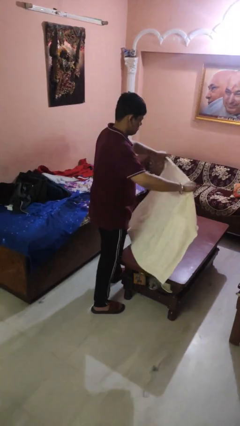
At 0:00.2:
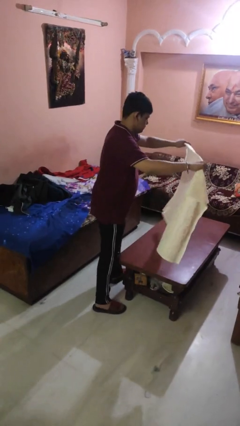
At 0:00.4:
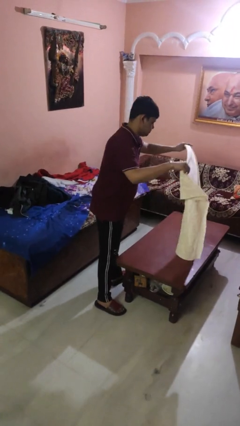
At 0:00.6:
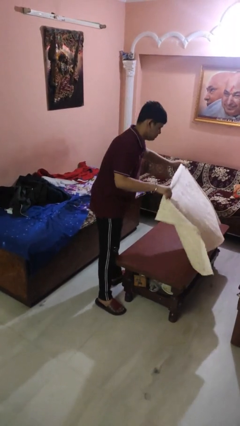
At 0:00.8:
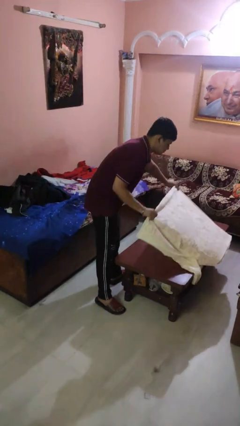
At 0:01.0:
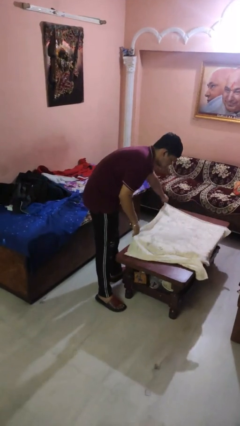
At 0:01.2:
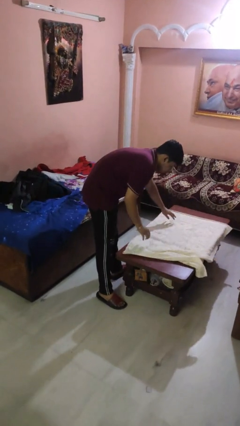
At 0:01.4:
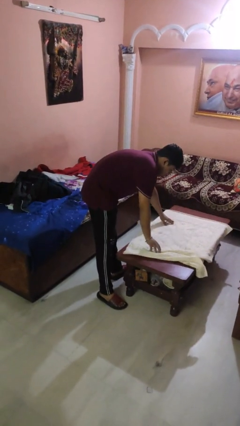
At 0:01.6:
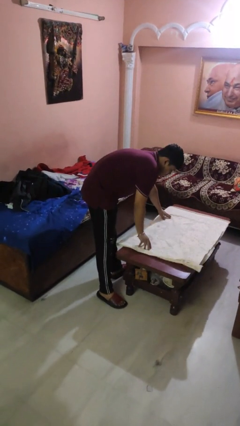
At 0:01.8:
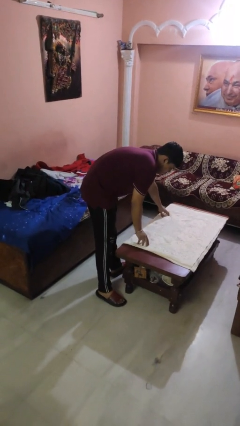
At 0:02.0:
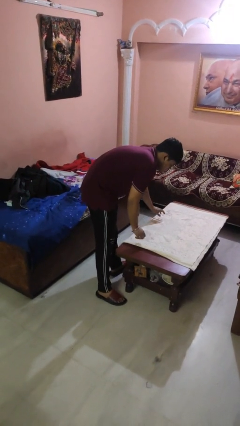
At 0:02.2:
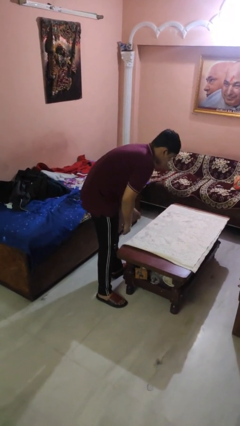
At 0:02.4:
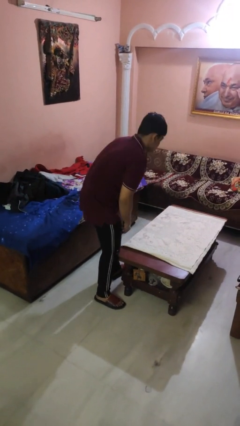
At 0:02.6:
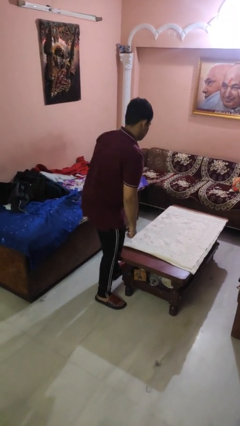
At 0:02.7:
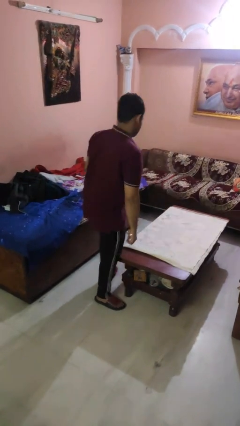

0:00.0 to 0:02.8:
person spreads tablecloth

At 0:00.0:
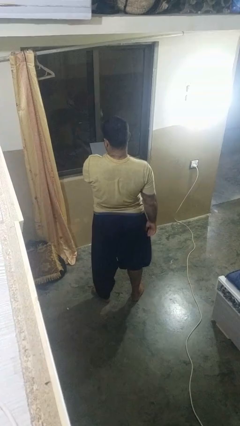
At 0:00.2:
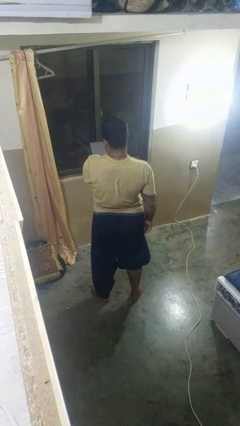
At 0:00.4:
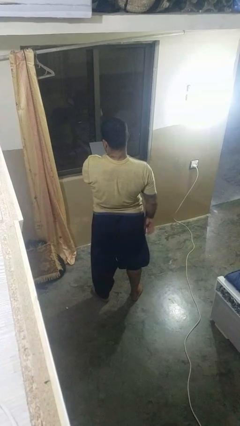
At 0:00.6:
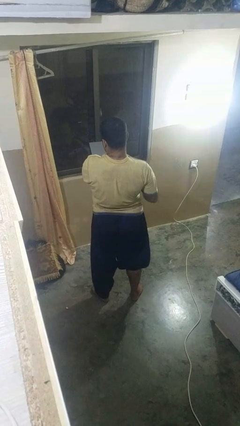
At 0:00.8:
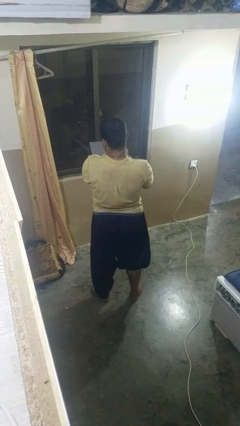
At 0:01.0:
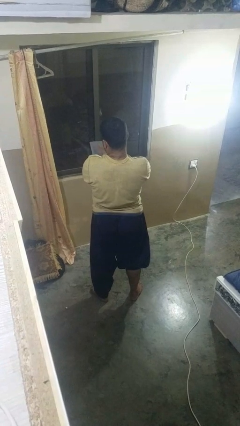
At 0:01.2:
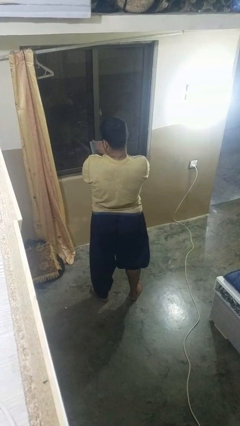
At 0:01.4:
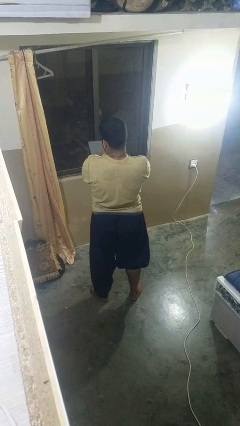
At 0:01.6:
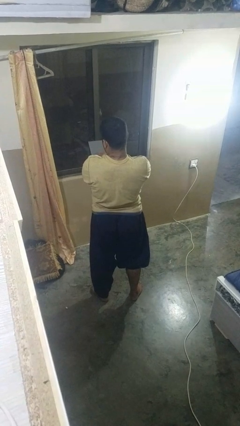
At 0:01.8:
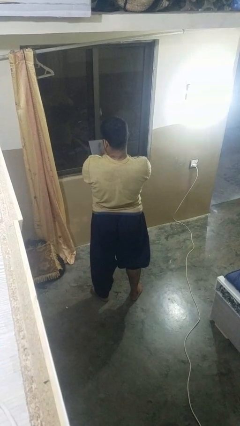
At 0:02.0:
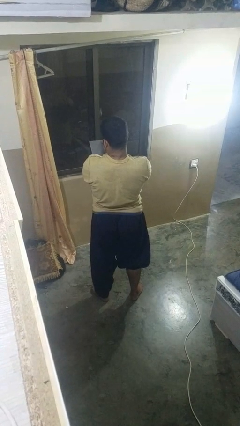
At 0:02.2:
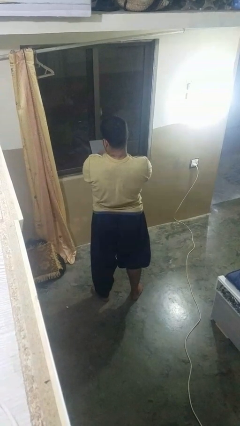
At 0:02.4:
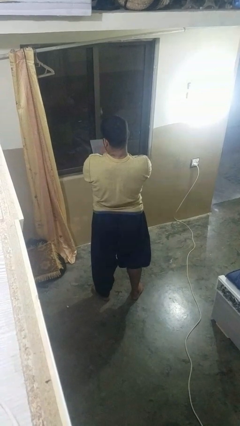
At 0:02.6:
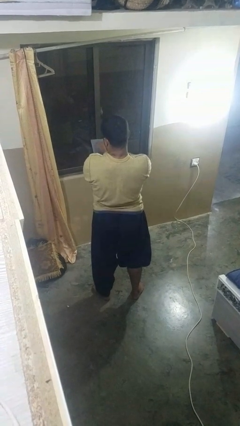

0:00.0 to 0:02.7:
person interacts with tablet

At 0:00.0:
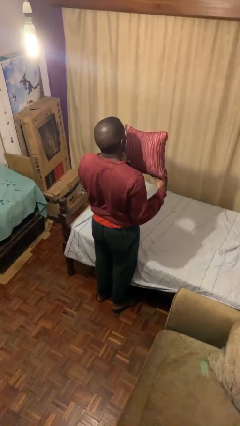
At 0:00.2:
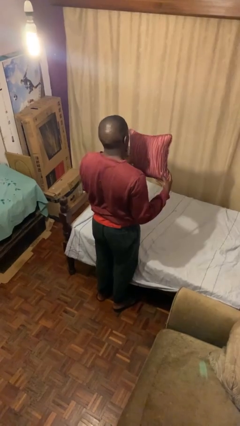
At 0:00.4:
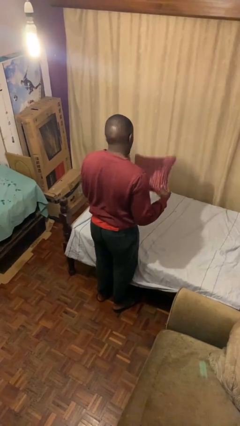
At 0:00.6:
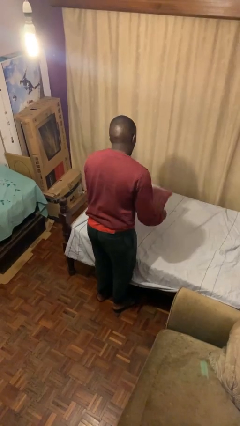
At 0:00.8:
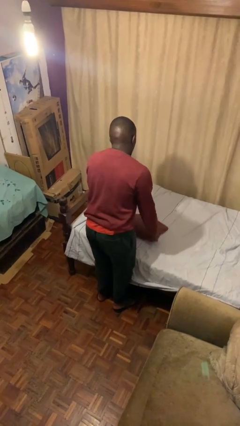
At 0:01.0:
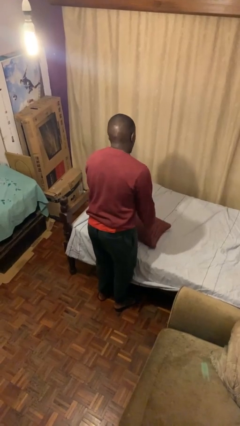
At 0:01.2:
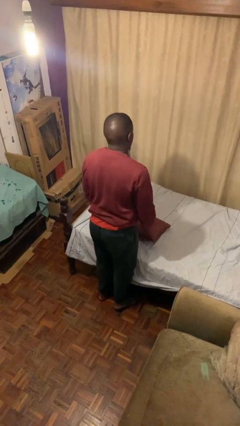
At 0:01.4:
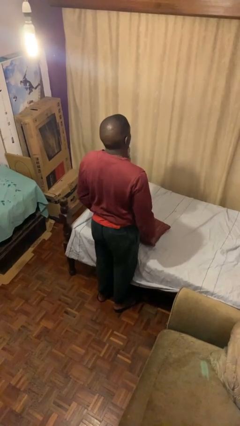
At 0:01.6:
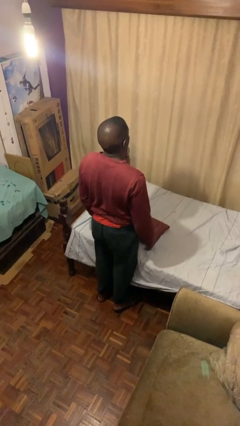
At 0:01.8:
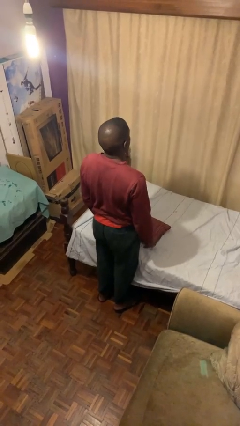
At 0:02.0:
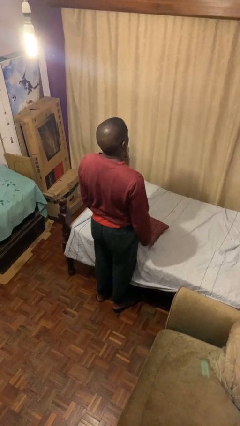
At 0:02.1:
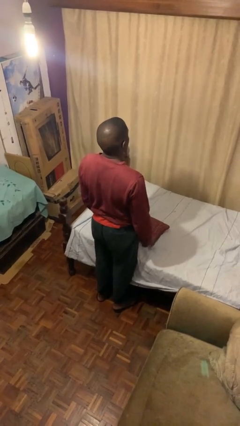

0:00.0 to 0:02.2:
person puts down object on bed

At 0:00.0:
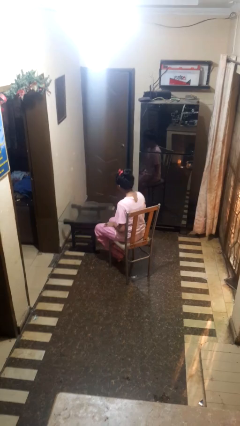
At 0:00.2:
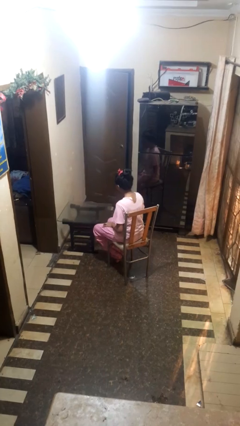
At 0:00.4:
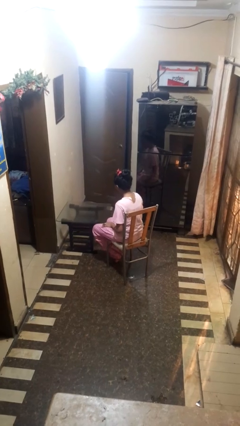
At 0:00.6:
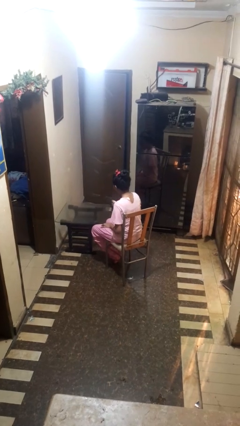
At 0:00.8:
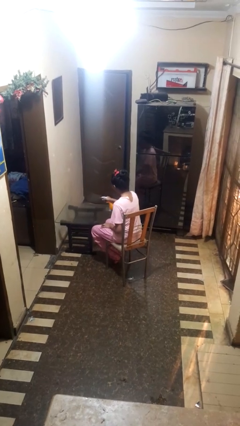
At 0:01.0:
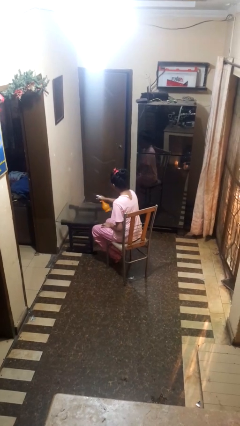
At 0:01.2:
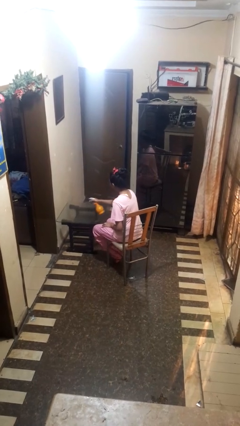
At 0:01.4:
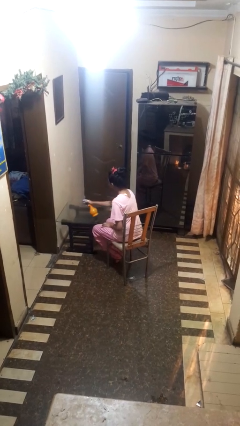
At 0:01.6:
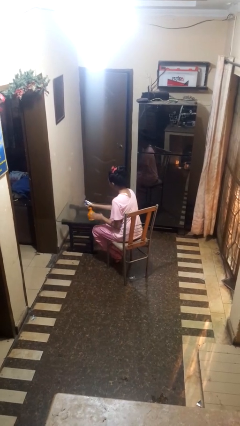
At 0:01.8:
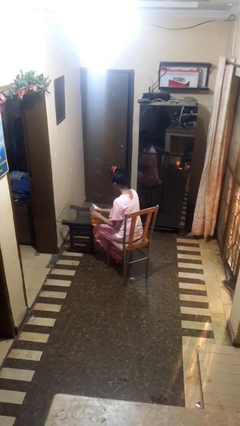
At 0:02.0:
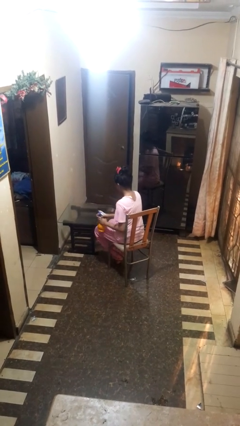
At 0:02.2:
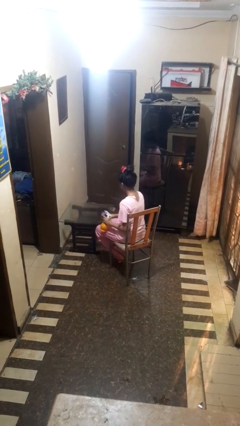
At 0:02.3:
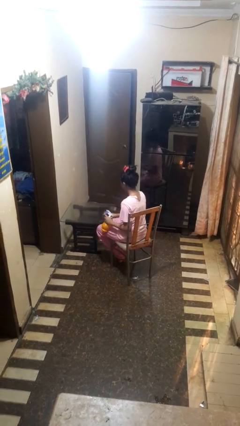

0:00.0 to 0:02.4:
person sprays from bottle

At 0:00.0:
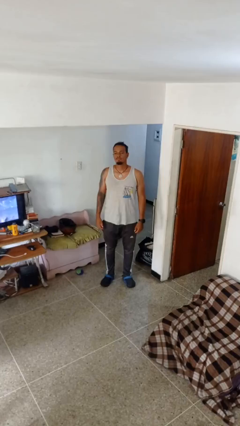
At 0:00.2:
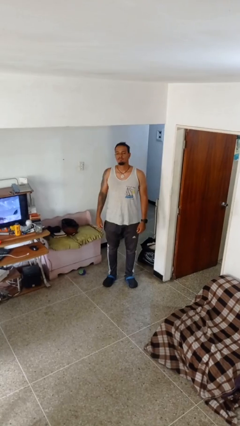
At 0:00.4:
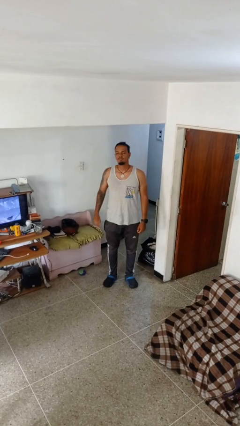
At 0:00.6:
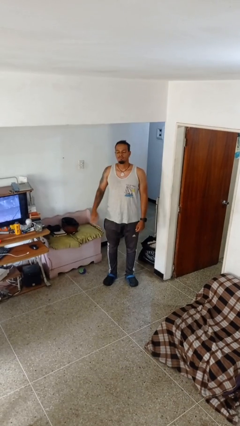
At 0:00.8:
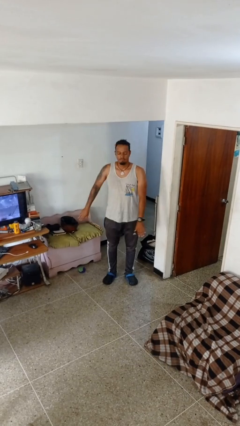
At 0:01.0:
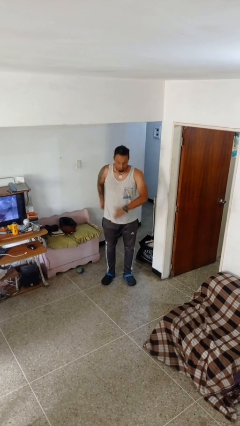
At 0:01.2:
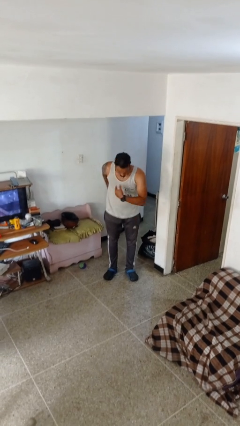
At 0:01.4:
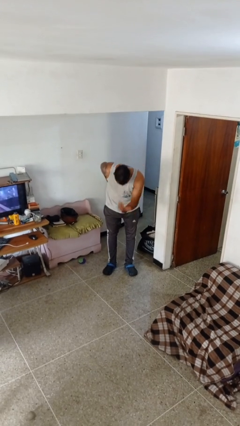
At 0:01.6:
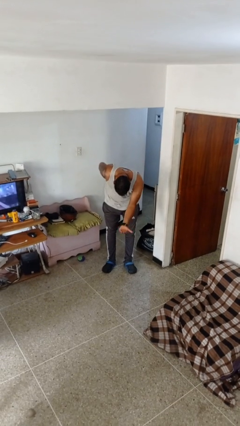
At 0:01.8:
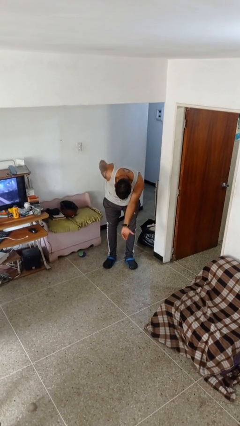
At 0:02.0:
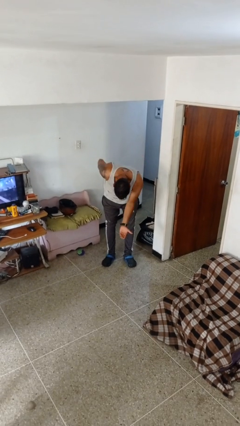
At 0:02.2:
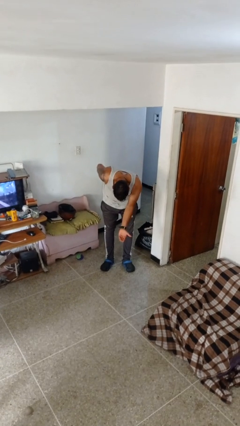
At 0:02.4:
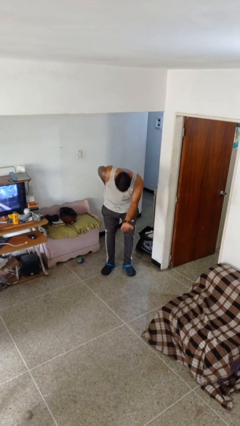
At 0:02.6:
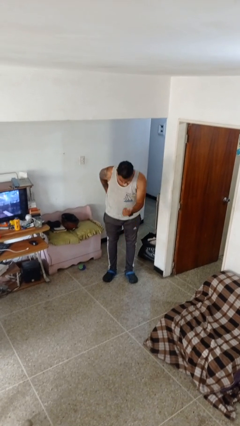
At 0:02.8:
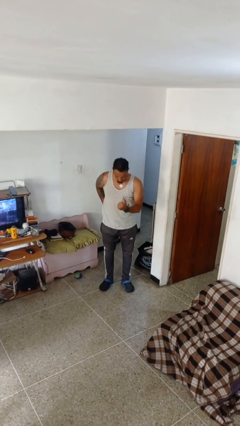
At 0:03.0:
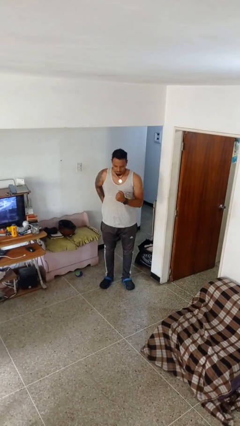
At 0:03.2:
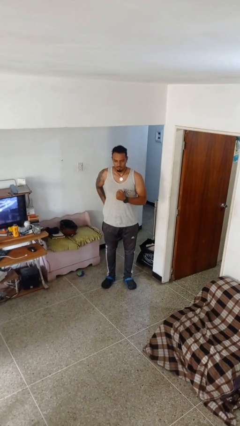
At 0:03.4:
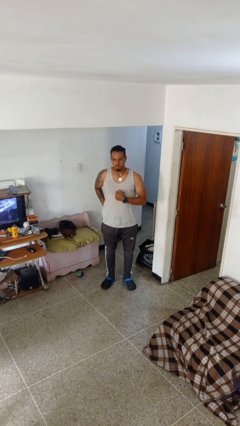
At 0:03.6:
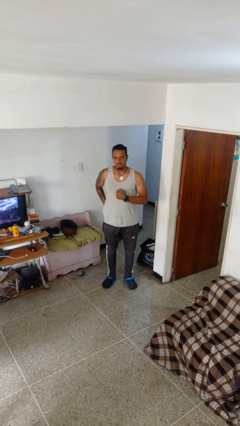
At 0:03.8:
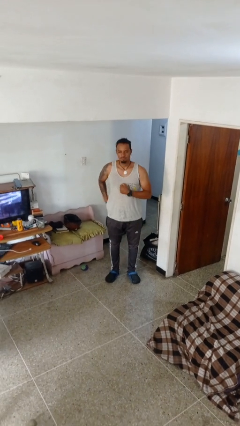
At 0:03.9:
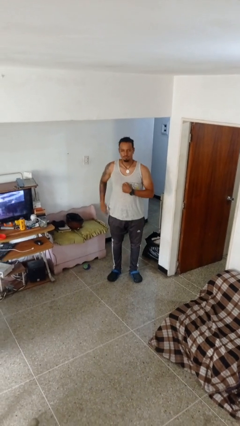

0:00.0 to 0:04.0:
person bows

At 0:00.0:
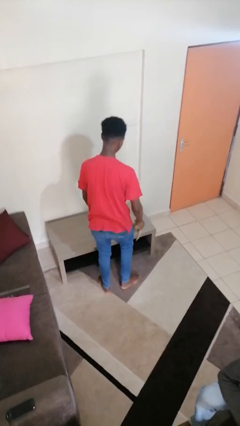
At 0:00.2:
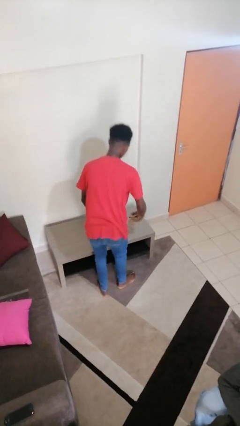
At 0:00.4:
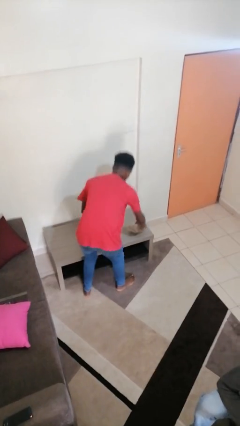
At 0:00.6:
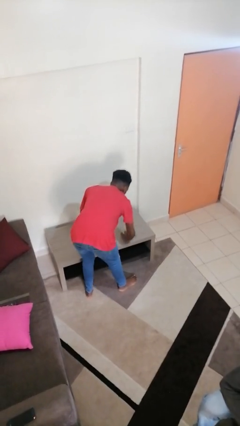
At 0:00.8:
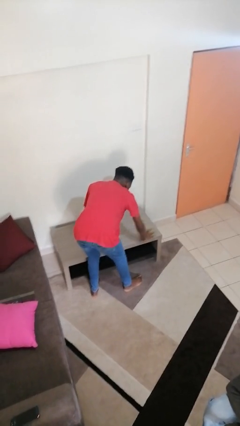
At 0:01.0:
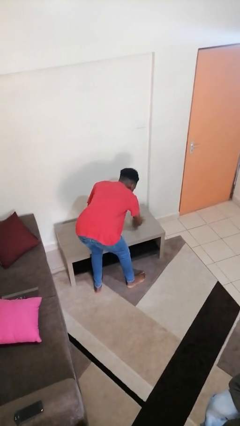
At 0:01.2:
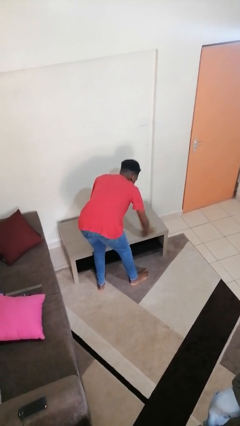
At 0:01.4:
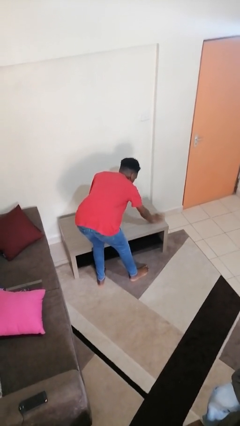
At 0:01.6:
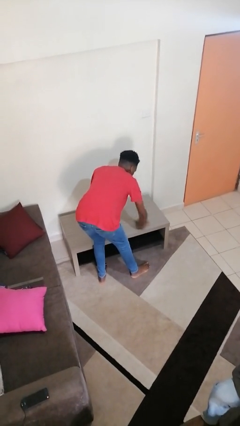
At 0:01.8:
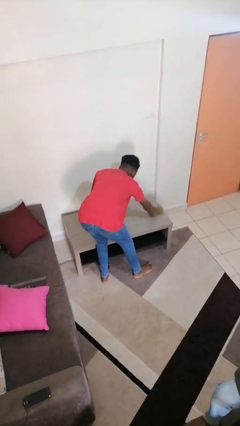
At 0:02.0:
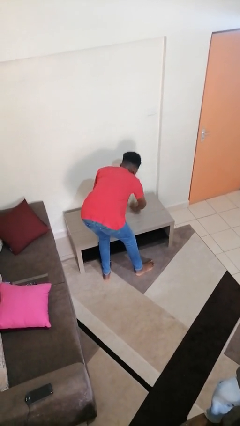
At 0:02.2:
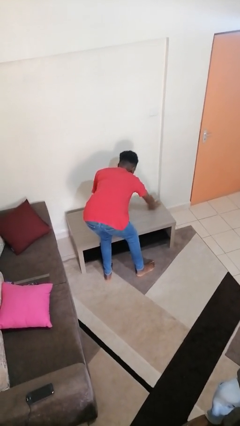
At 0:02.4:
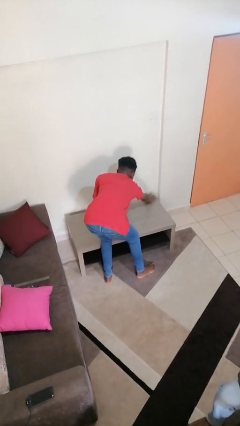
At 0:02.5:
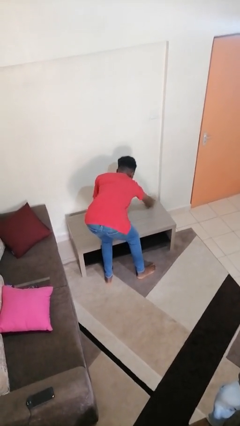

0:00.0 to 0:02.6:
person cleans table with rag

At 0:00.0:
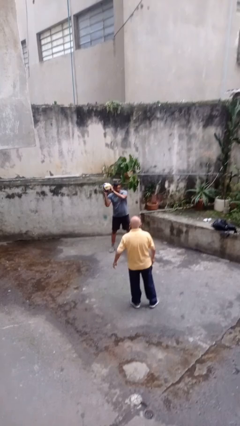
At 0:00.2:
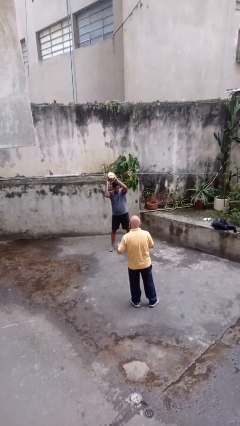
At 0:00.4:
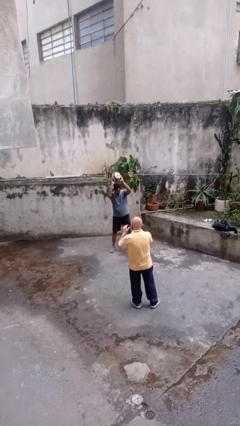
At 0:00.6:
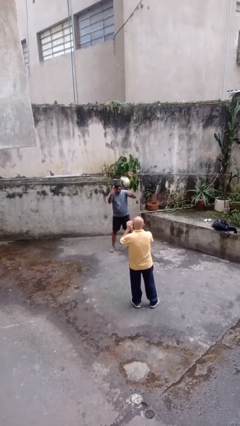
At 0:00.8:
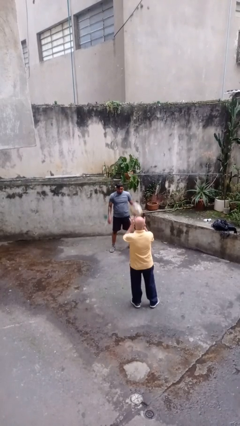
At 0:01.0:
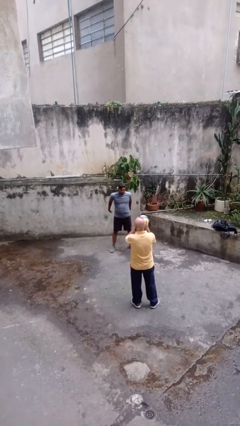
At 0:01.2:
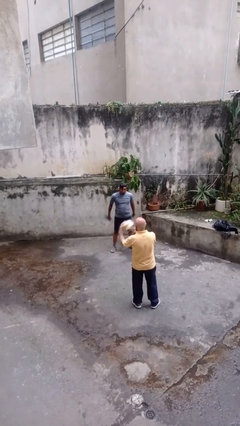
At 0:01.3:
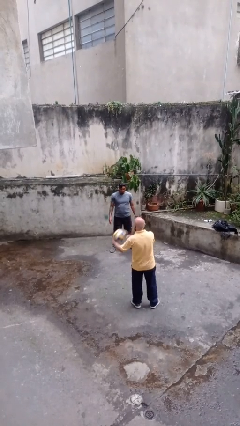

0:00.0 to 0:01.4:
person throws object to person
